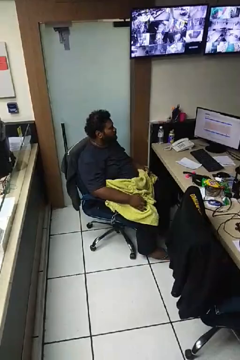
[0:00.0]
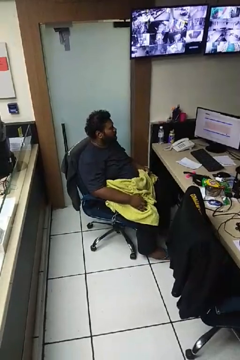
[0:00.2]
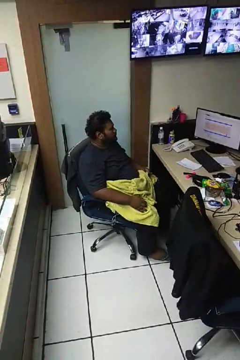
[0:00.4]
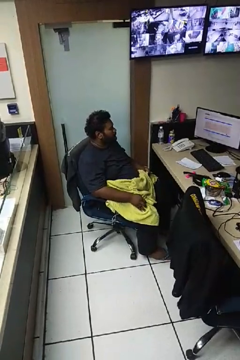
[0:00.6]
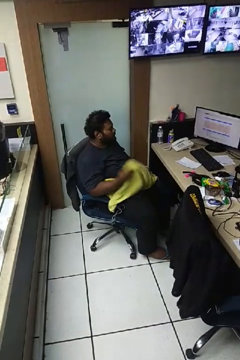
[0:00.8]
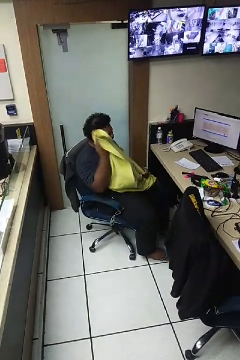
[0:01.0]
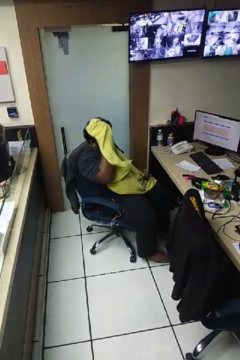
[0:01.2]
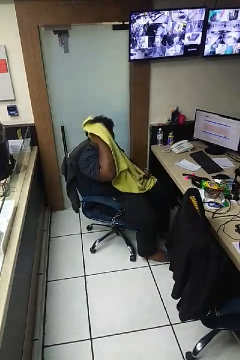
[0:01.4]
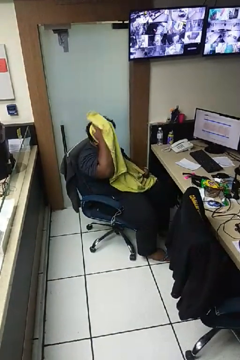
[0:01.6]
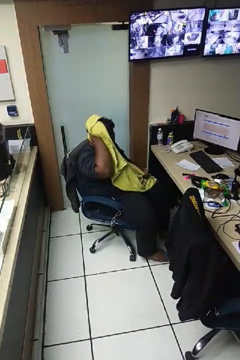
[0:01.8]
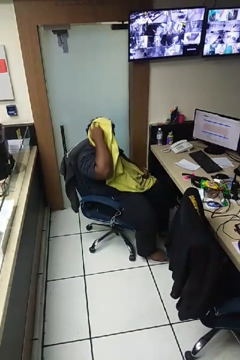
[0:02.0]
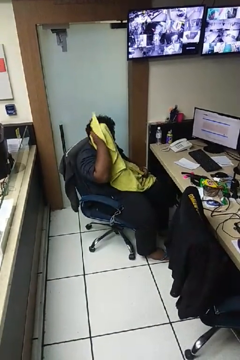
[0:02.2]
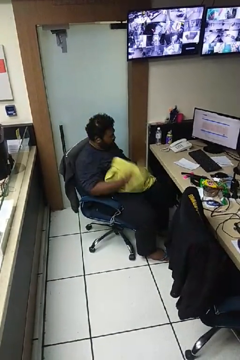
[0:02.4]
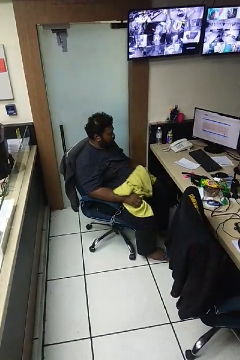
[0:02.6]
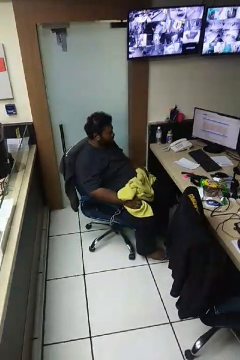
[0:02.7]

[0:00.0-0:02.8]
person dries hair with towel

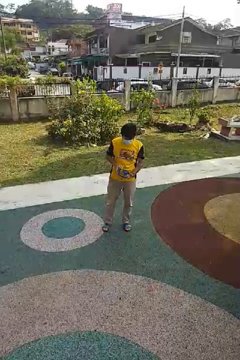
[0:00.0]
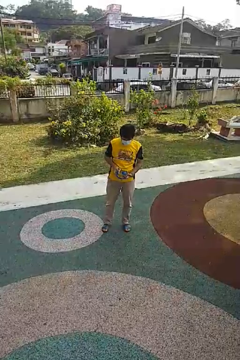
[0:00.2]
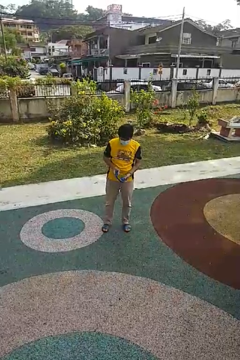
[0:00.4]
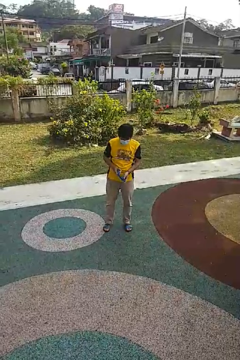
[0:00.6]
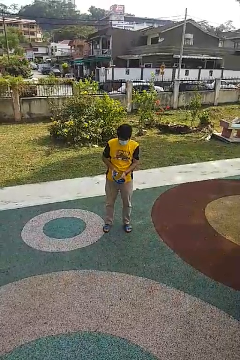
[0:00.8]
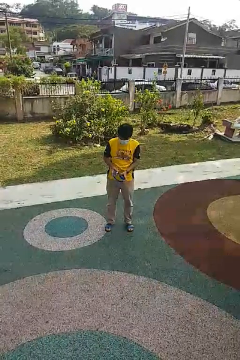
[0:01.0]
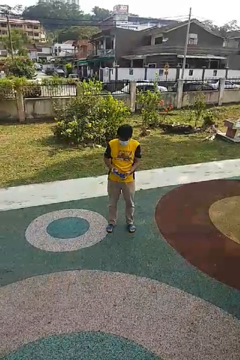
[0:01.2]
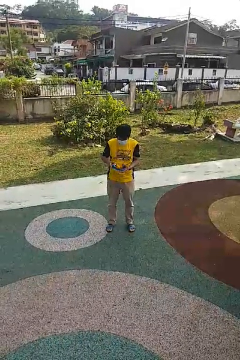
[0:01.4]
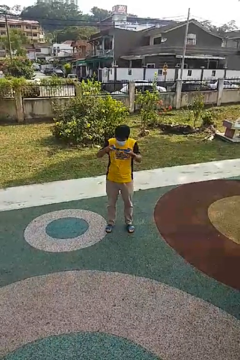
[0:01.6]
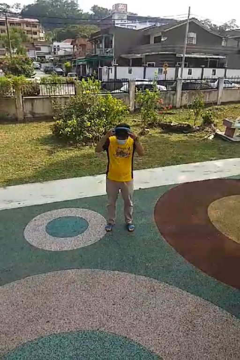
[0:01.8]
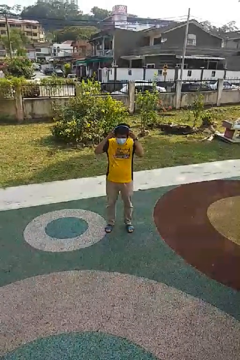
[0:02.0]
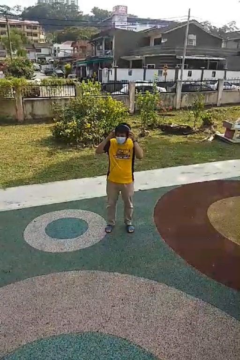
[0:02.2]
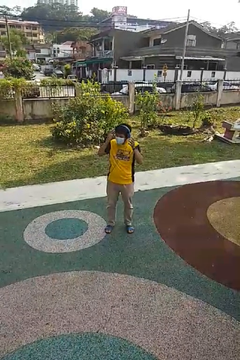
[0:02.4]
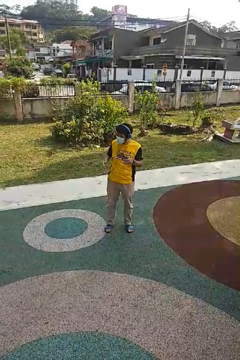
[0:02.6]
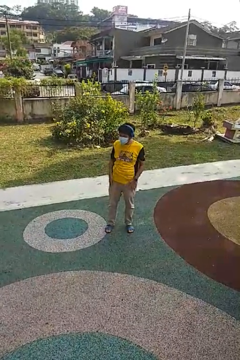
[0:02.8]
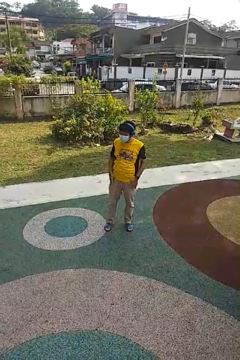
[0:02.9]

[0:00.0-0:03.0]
person puts on headphones

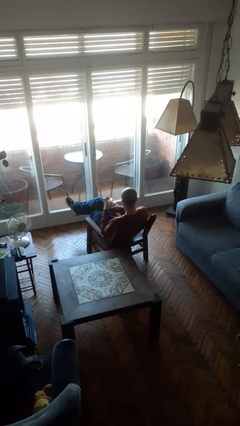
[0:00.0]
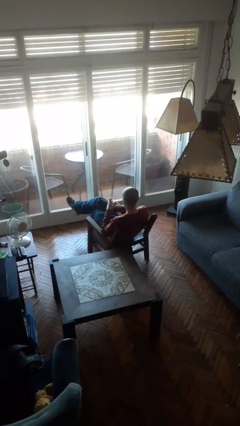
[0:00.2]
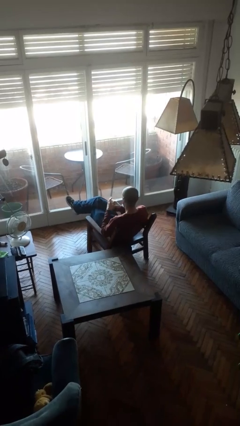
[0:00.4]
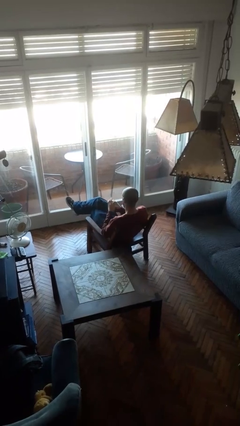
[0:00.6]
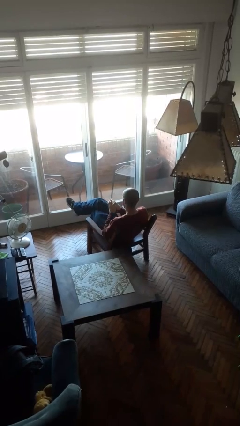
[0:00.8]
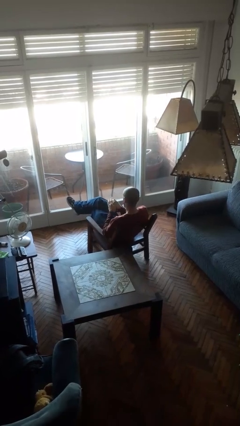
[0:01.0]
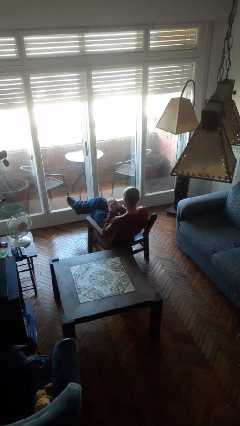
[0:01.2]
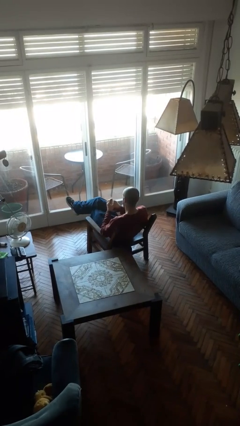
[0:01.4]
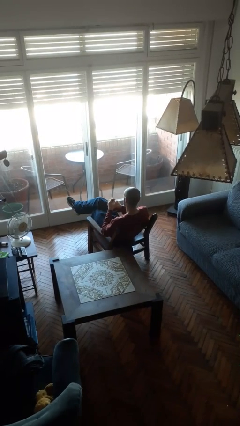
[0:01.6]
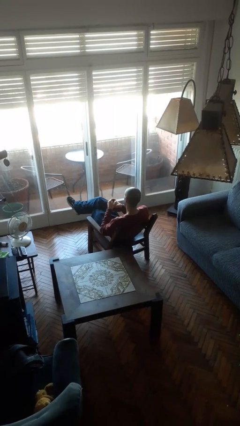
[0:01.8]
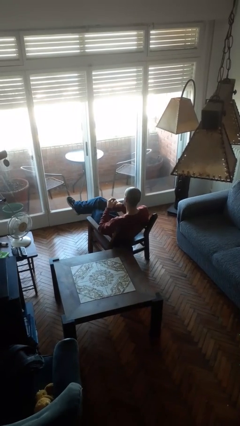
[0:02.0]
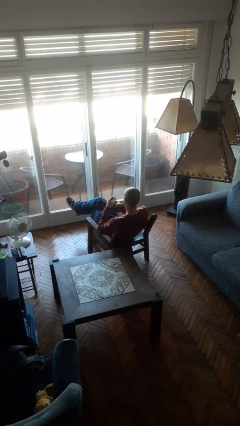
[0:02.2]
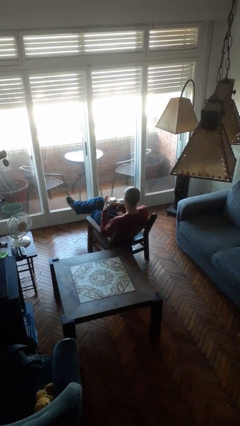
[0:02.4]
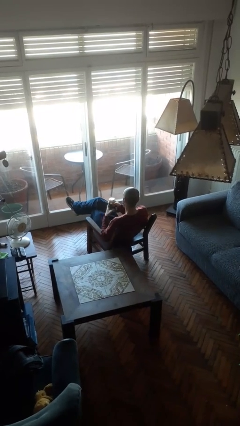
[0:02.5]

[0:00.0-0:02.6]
person closes jar

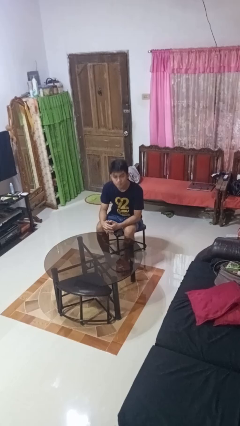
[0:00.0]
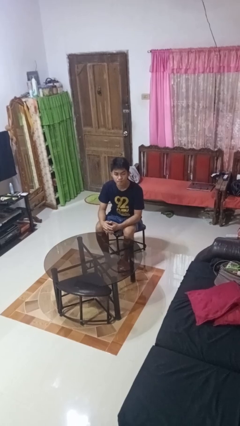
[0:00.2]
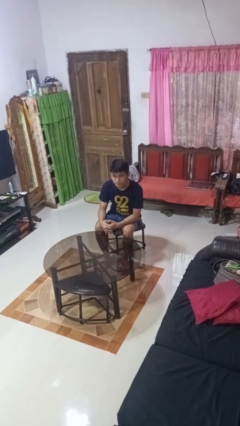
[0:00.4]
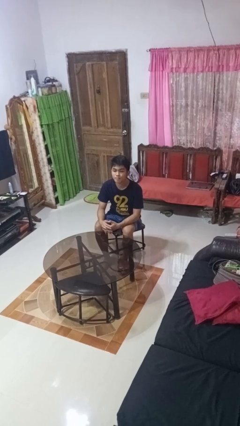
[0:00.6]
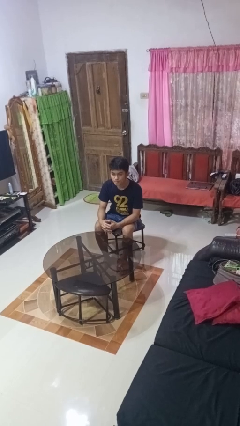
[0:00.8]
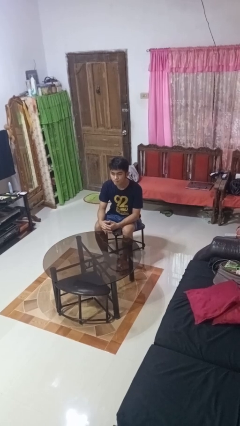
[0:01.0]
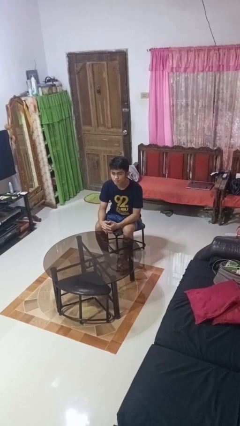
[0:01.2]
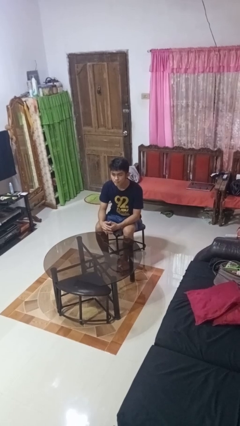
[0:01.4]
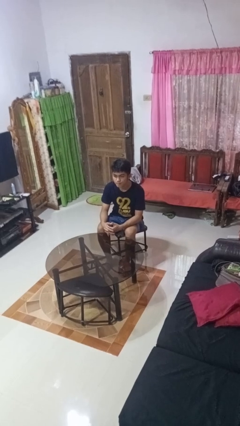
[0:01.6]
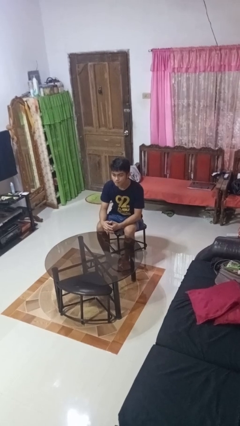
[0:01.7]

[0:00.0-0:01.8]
person nods head

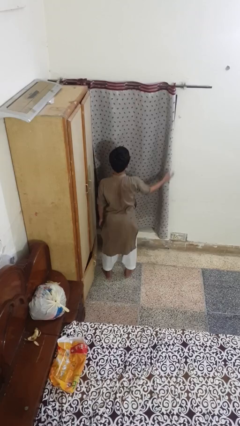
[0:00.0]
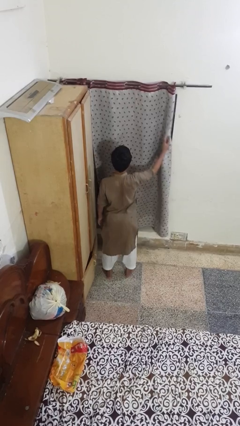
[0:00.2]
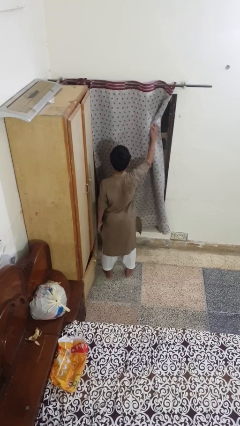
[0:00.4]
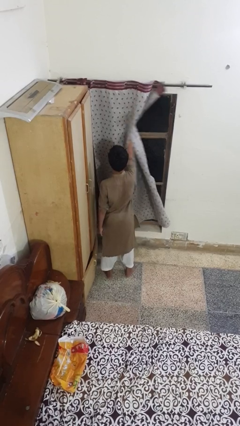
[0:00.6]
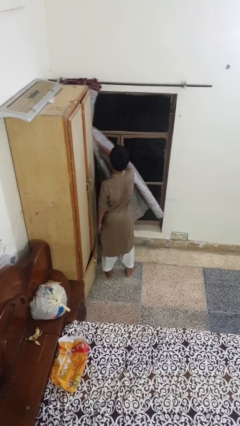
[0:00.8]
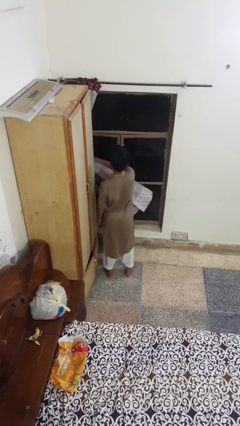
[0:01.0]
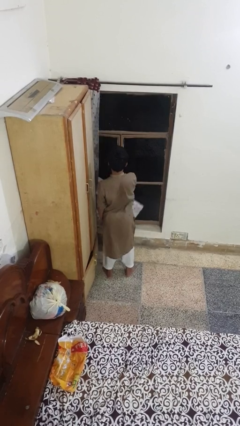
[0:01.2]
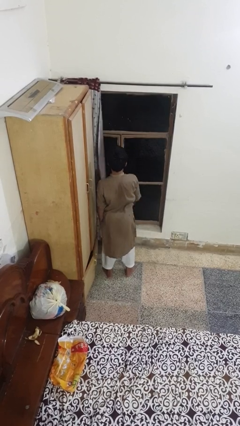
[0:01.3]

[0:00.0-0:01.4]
person opens curtains

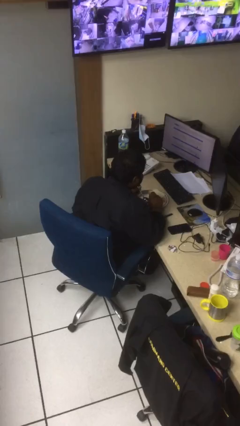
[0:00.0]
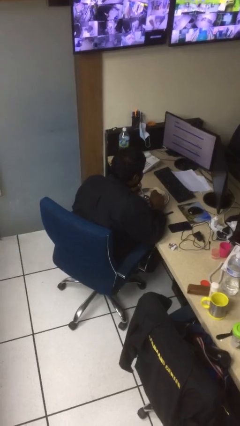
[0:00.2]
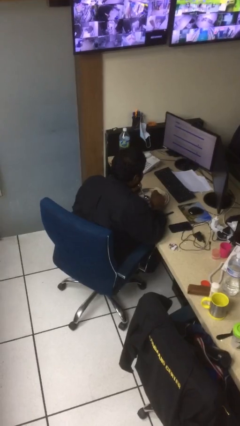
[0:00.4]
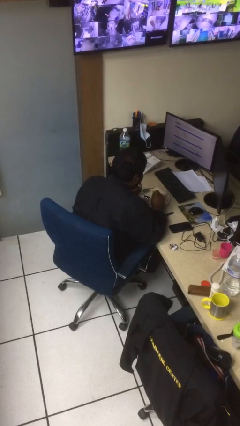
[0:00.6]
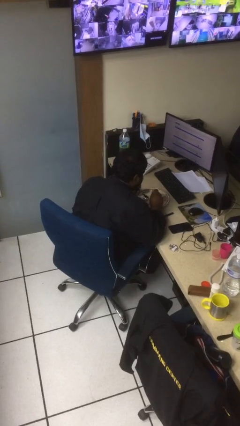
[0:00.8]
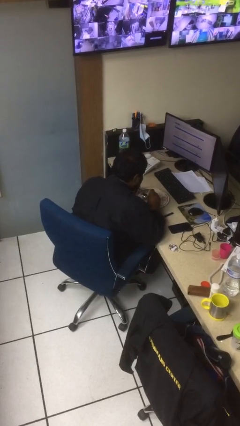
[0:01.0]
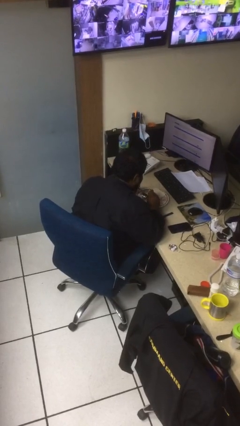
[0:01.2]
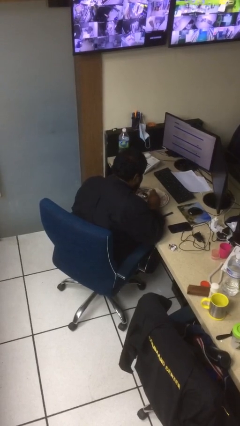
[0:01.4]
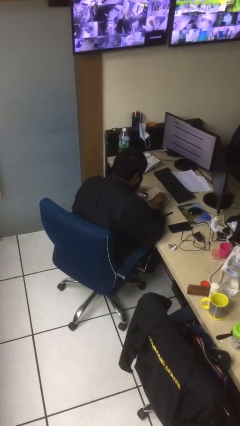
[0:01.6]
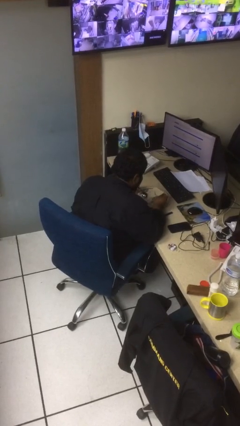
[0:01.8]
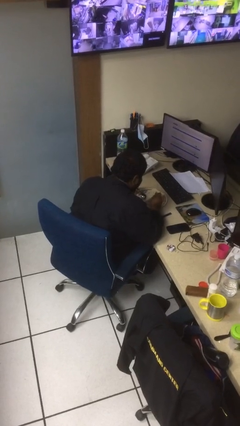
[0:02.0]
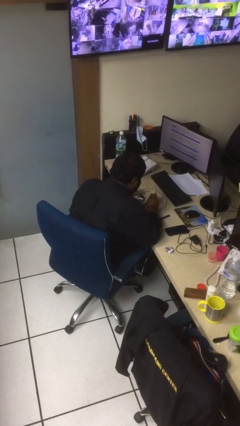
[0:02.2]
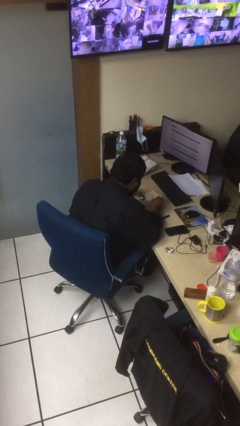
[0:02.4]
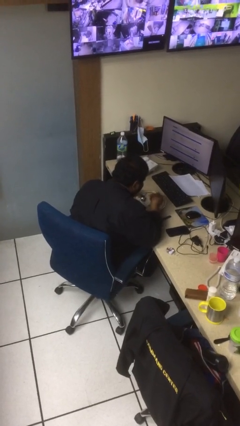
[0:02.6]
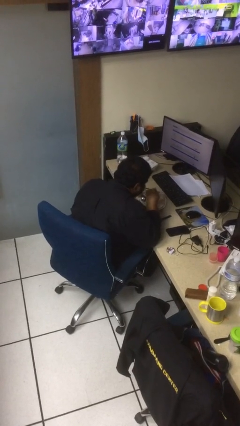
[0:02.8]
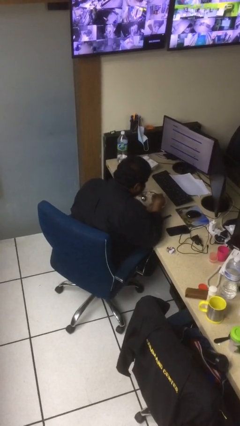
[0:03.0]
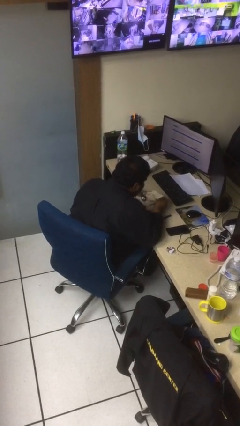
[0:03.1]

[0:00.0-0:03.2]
person eats with utensil

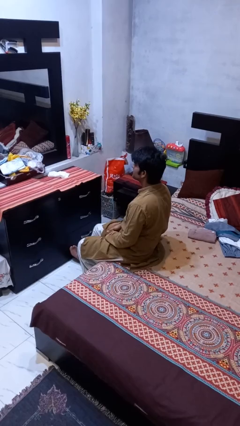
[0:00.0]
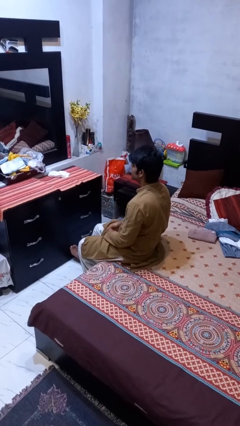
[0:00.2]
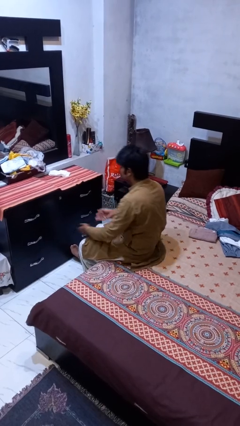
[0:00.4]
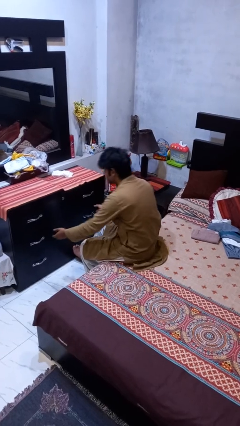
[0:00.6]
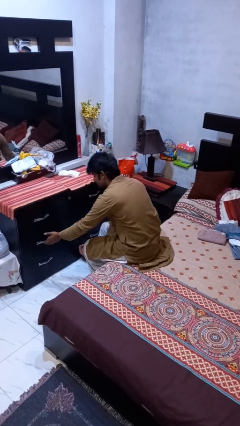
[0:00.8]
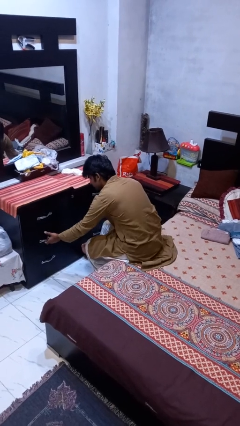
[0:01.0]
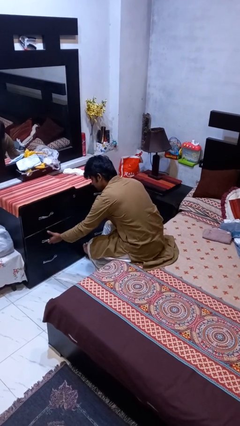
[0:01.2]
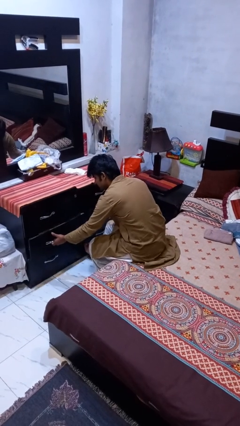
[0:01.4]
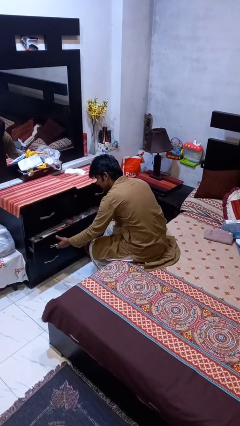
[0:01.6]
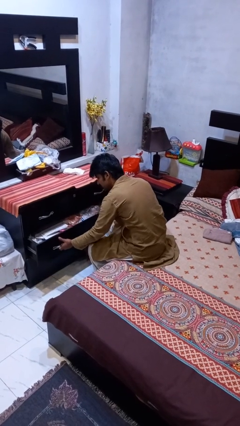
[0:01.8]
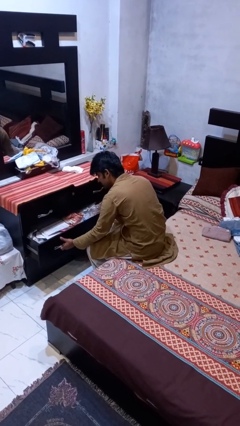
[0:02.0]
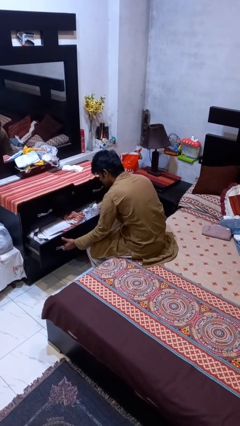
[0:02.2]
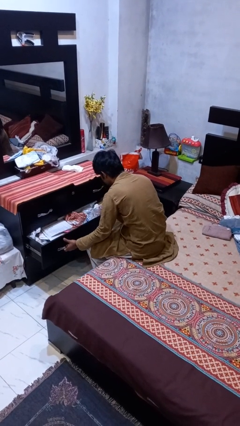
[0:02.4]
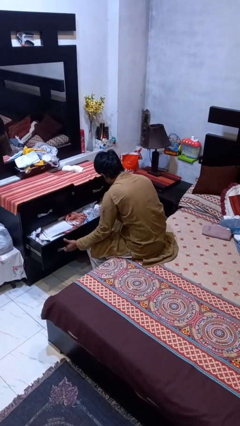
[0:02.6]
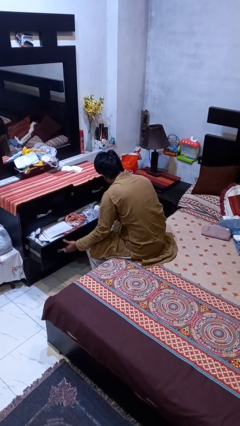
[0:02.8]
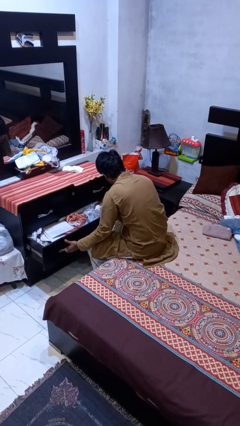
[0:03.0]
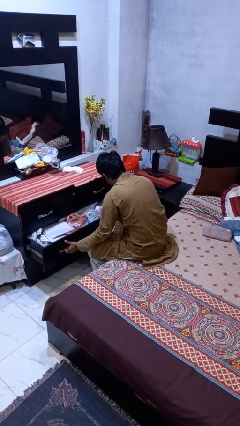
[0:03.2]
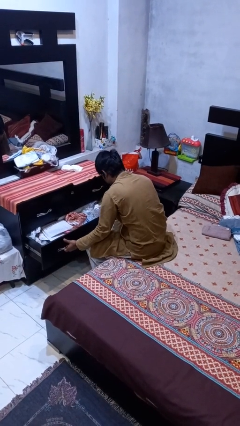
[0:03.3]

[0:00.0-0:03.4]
person opens dresser drawer
